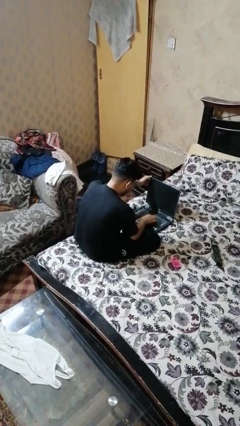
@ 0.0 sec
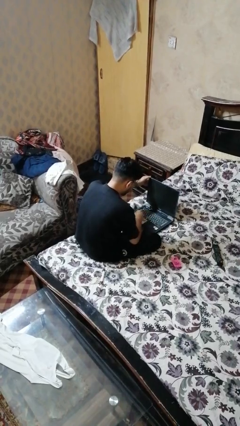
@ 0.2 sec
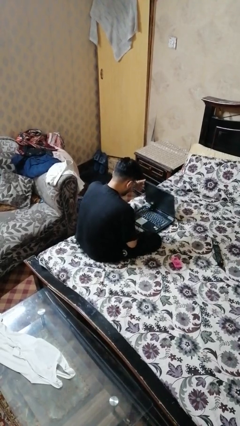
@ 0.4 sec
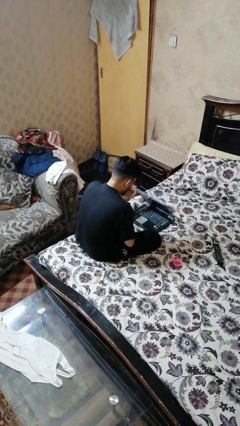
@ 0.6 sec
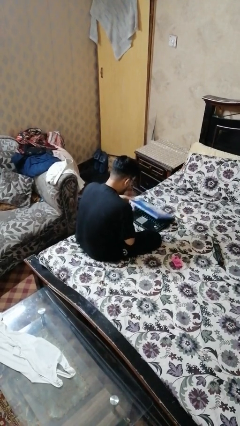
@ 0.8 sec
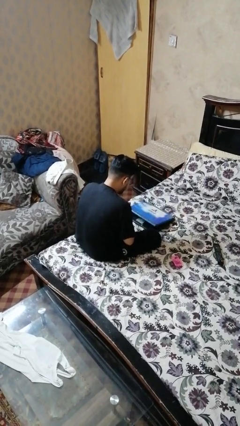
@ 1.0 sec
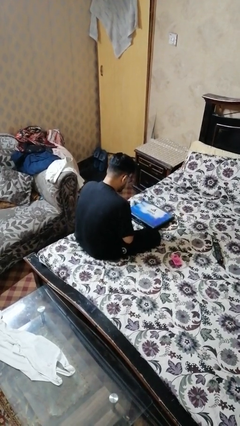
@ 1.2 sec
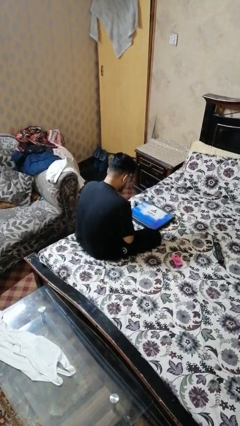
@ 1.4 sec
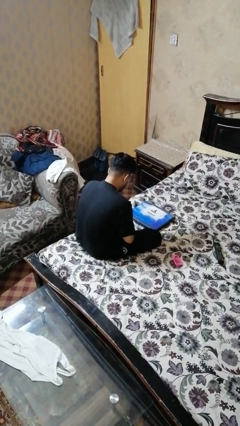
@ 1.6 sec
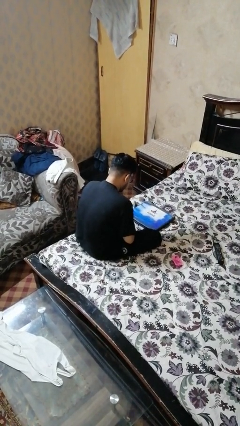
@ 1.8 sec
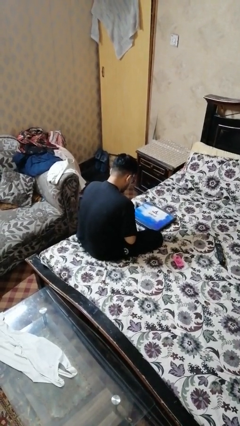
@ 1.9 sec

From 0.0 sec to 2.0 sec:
person closes laptop

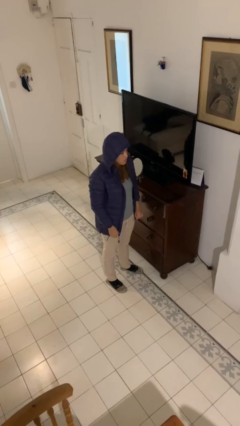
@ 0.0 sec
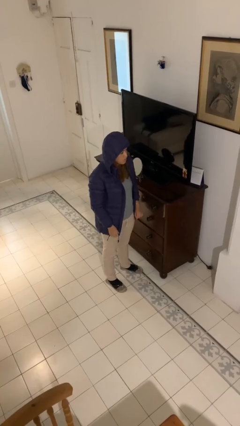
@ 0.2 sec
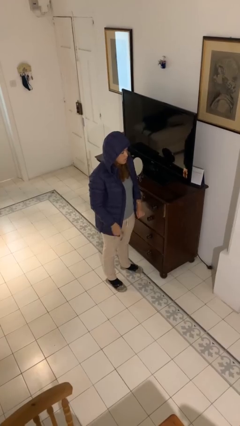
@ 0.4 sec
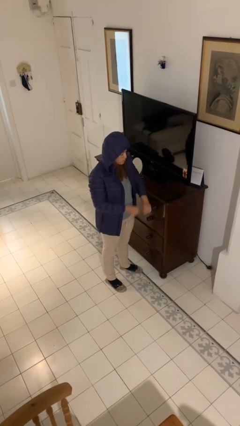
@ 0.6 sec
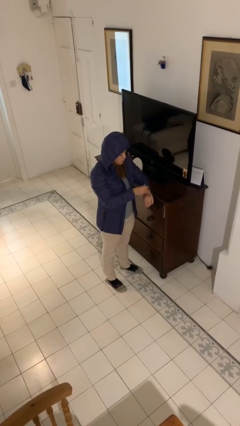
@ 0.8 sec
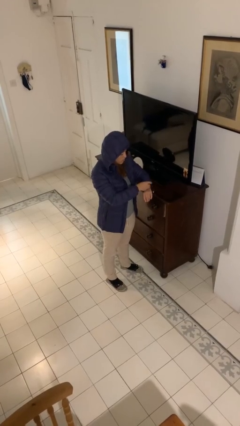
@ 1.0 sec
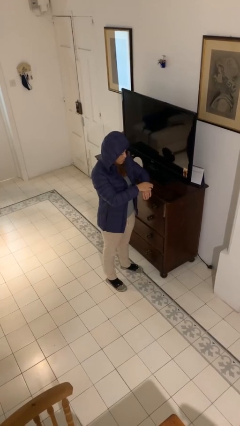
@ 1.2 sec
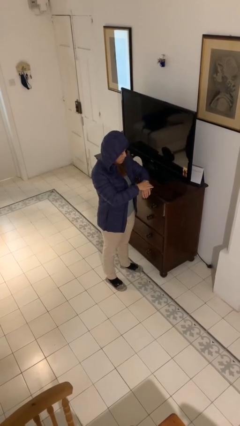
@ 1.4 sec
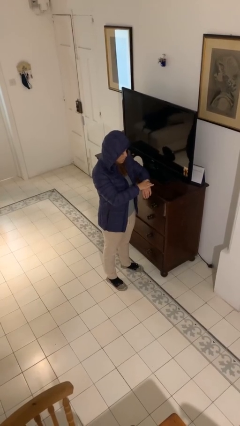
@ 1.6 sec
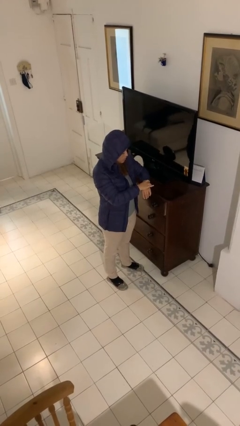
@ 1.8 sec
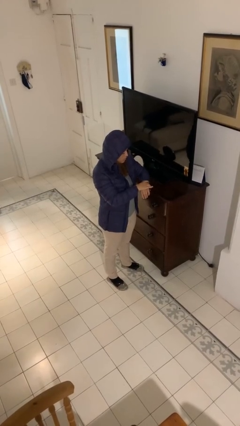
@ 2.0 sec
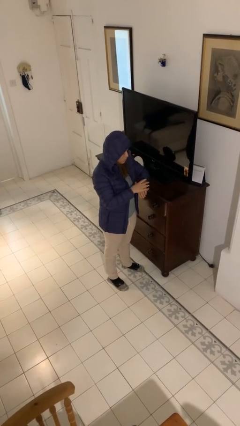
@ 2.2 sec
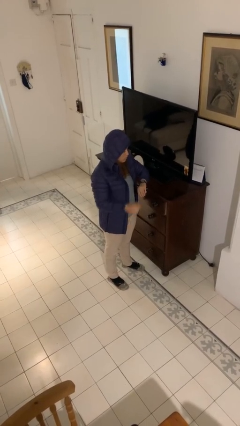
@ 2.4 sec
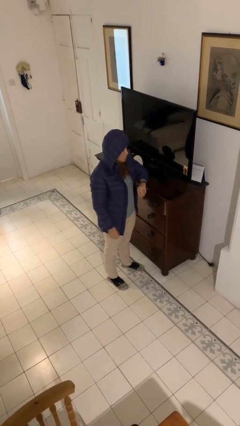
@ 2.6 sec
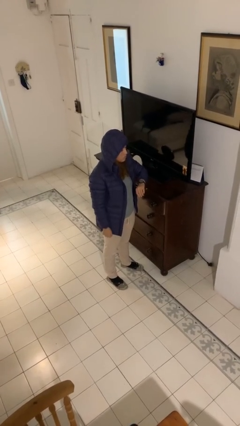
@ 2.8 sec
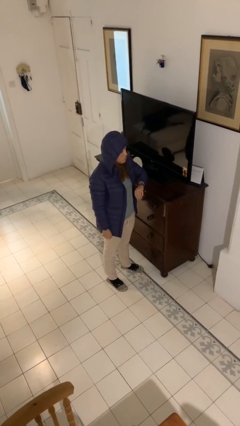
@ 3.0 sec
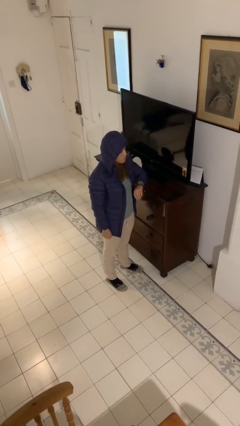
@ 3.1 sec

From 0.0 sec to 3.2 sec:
person puts on wristwatch

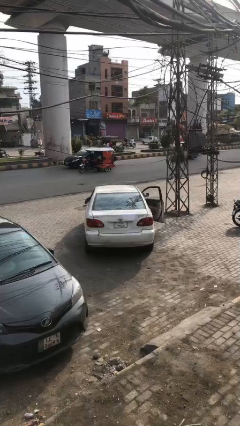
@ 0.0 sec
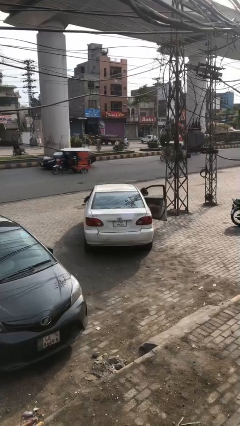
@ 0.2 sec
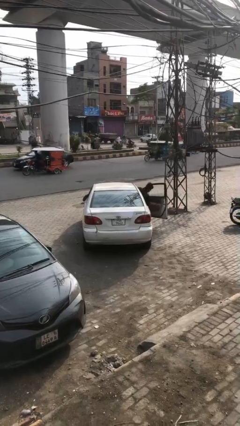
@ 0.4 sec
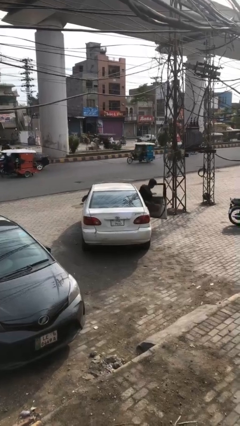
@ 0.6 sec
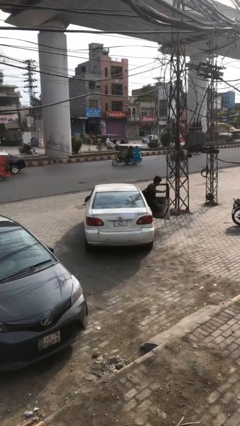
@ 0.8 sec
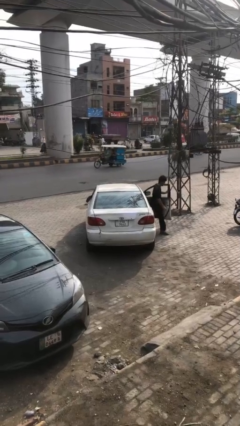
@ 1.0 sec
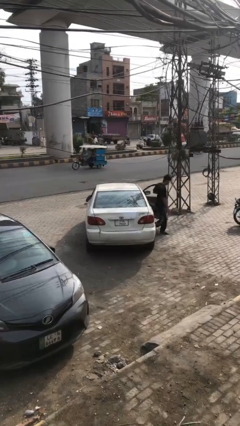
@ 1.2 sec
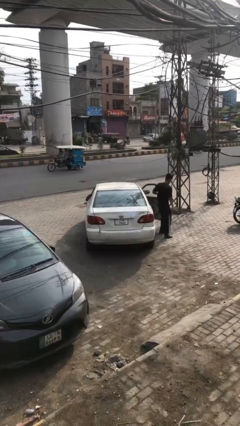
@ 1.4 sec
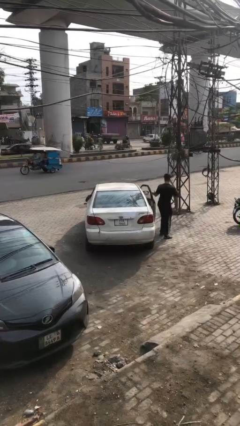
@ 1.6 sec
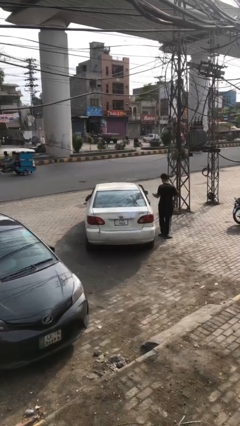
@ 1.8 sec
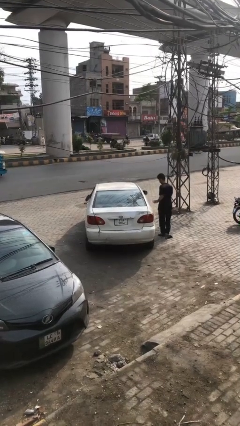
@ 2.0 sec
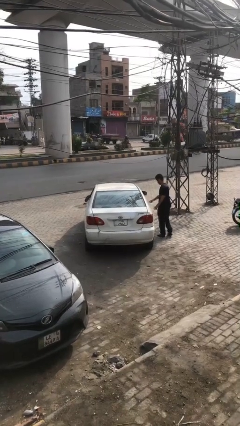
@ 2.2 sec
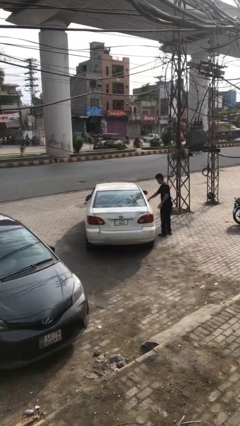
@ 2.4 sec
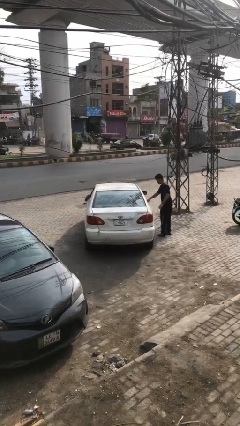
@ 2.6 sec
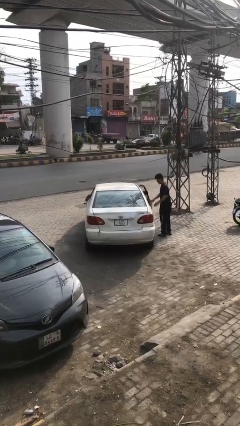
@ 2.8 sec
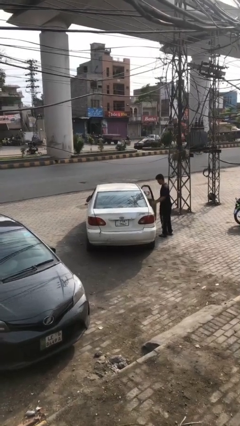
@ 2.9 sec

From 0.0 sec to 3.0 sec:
car drops off person

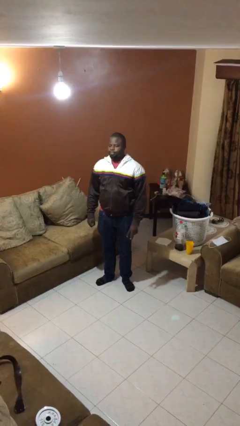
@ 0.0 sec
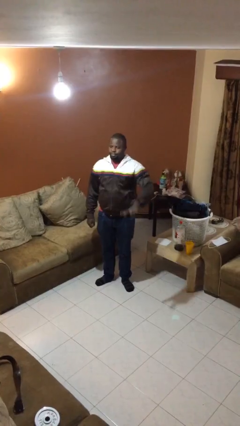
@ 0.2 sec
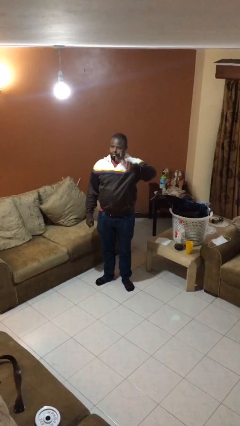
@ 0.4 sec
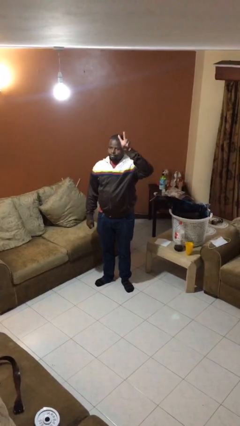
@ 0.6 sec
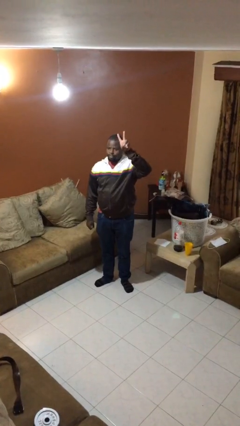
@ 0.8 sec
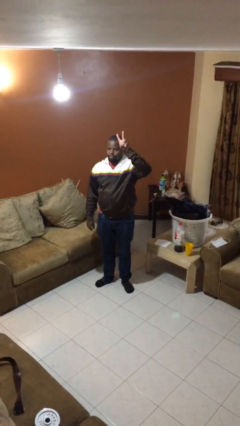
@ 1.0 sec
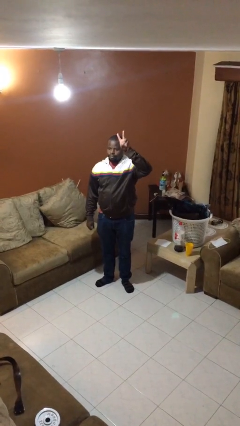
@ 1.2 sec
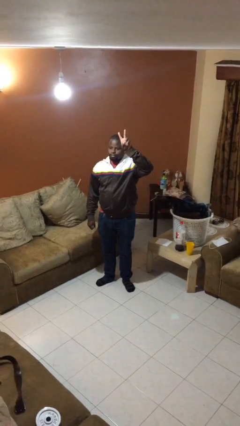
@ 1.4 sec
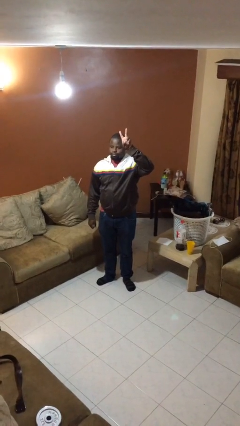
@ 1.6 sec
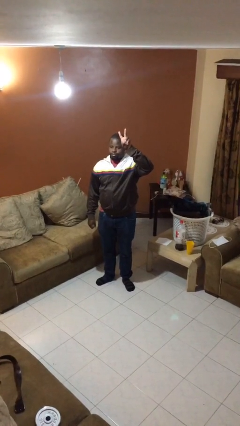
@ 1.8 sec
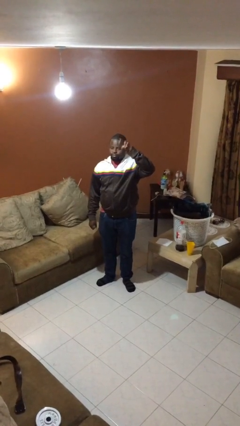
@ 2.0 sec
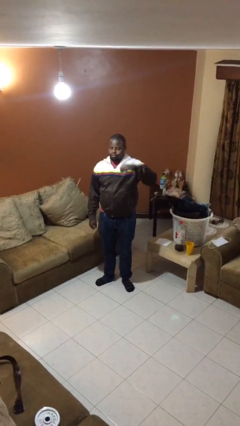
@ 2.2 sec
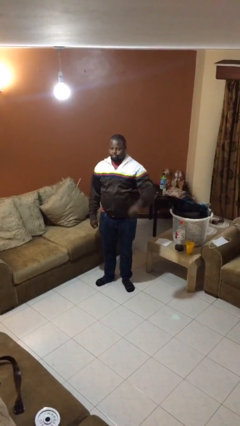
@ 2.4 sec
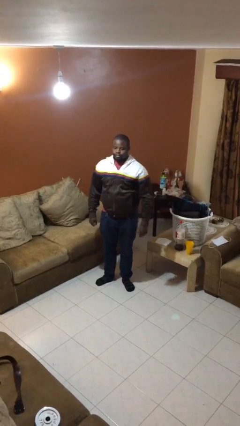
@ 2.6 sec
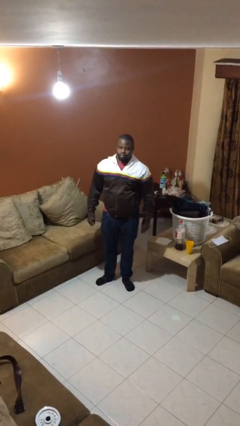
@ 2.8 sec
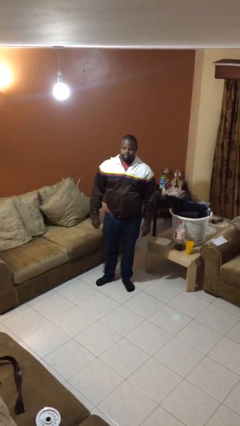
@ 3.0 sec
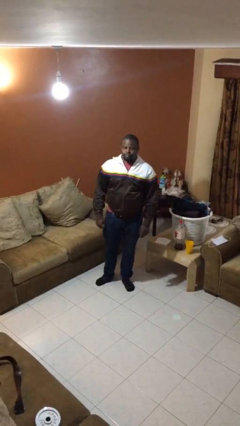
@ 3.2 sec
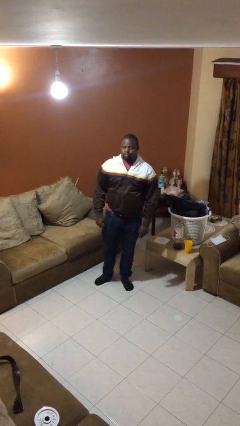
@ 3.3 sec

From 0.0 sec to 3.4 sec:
person gestures peace

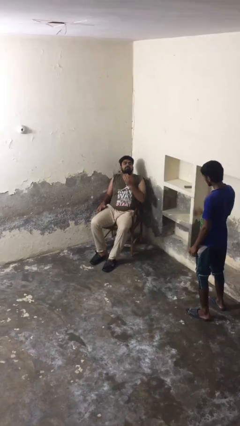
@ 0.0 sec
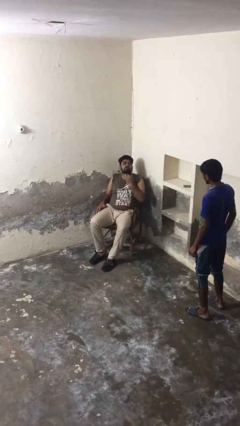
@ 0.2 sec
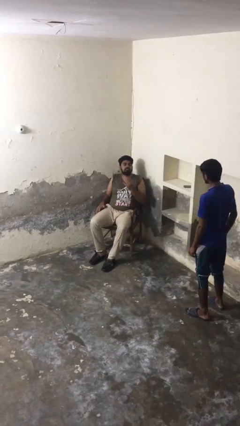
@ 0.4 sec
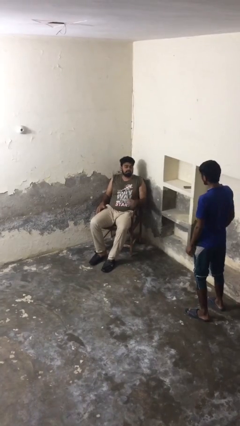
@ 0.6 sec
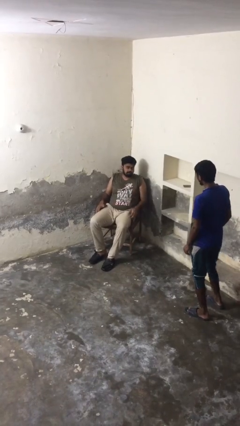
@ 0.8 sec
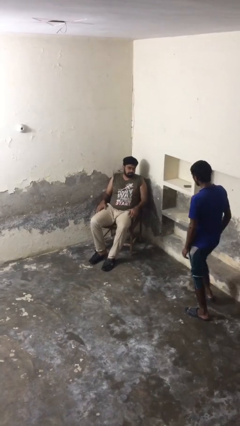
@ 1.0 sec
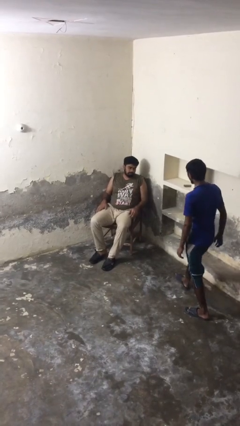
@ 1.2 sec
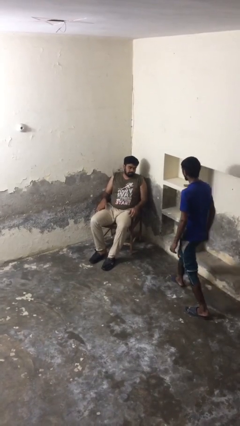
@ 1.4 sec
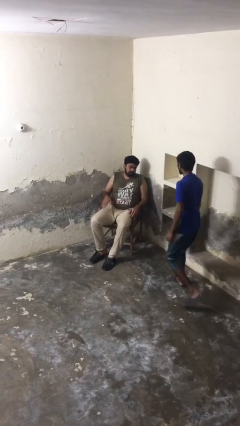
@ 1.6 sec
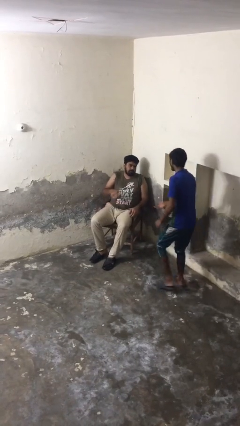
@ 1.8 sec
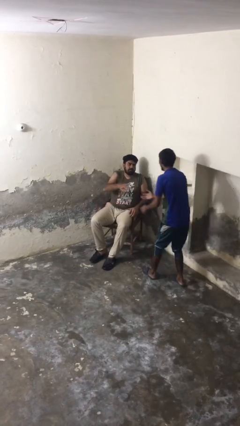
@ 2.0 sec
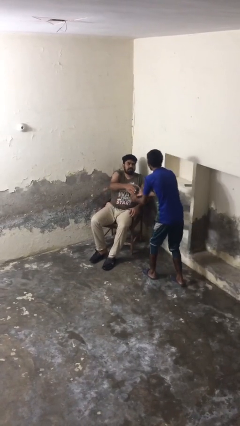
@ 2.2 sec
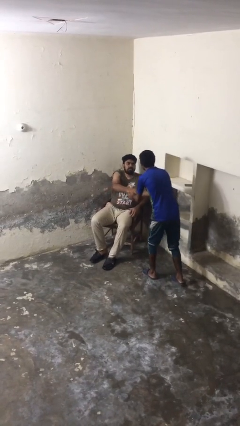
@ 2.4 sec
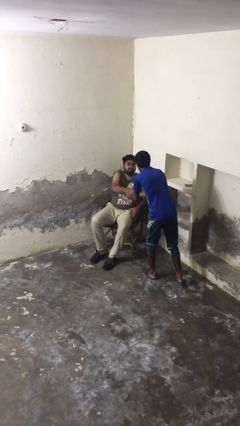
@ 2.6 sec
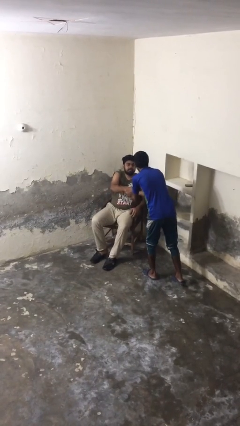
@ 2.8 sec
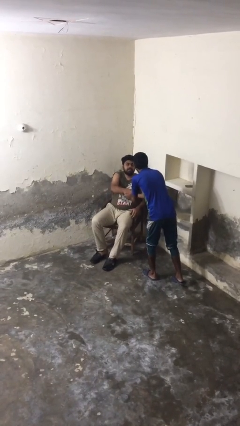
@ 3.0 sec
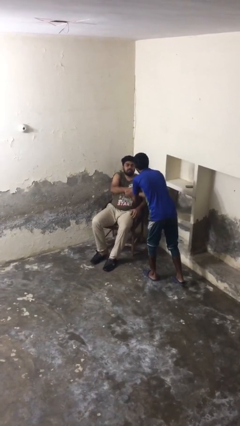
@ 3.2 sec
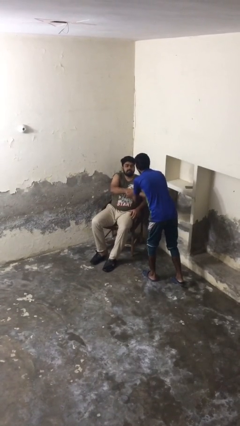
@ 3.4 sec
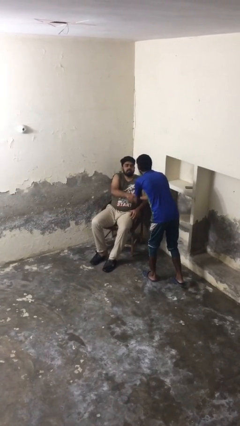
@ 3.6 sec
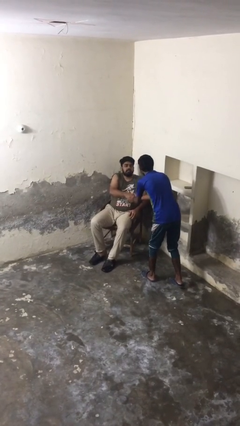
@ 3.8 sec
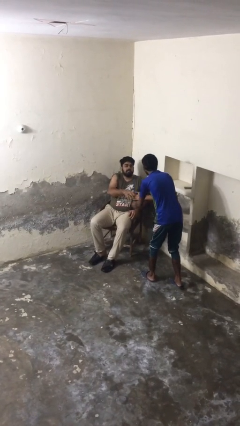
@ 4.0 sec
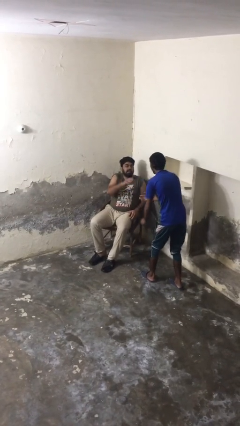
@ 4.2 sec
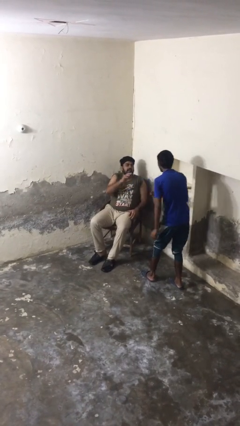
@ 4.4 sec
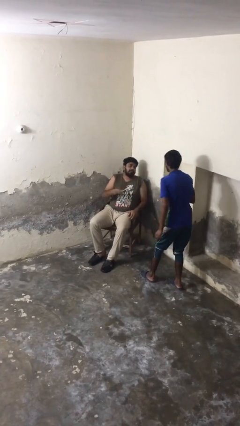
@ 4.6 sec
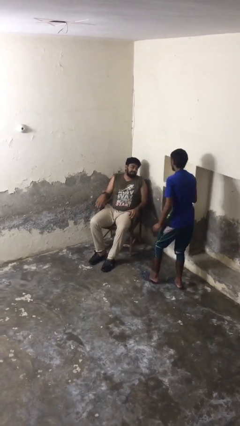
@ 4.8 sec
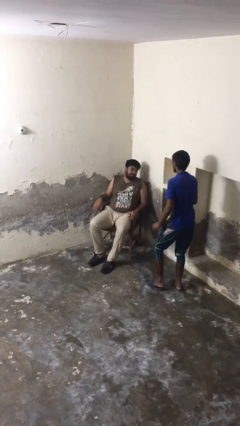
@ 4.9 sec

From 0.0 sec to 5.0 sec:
person shakes hand

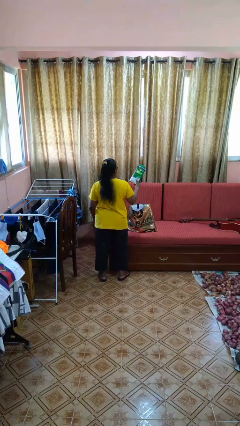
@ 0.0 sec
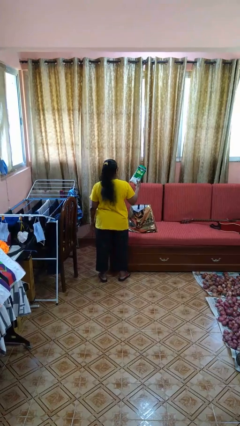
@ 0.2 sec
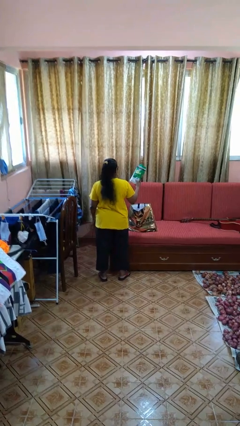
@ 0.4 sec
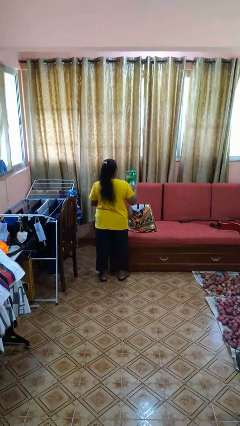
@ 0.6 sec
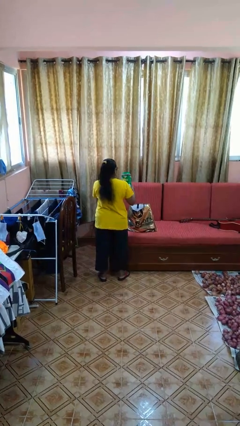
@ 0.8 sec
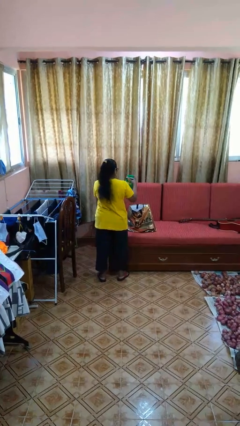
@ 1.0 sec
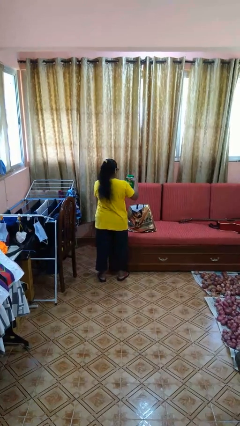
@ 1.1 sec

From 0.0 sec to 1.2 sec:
person puts object into bag
